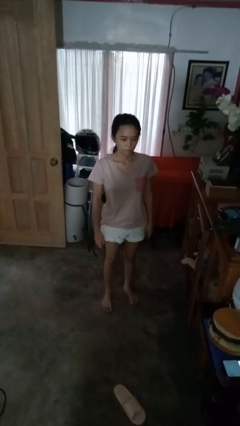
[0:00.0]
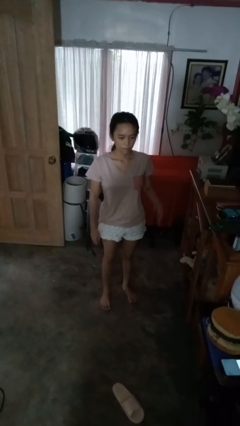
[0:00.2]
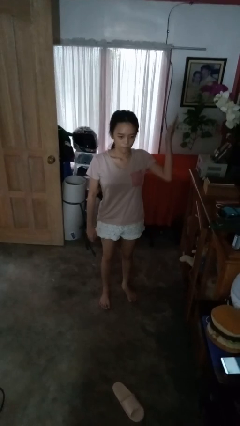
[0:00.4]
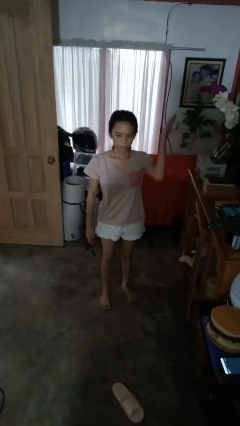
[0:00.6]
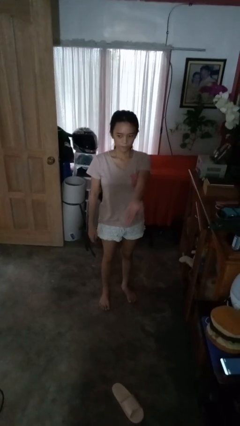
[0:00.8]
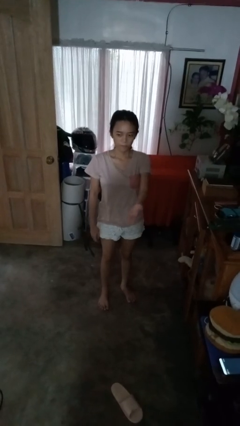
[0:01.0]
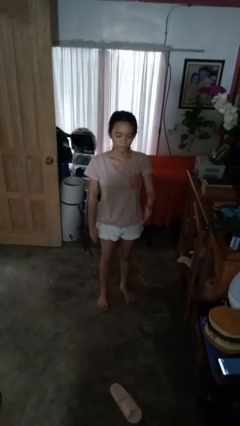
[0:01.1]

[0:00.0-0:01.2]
person karate chop

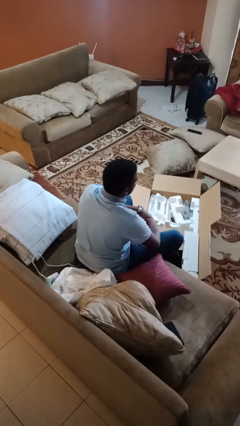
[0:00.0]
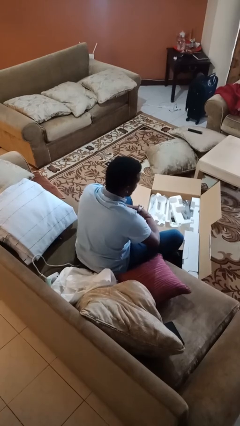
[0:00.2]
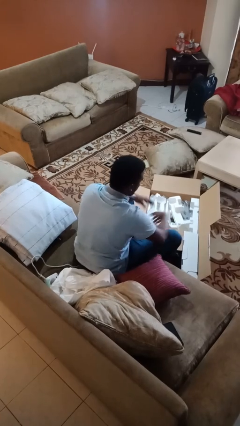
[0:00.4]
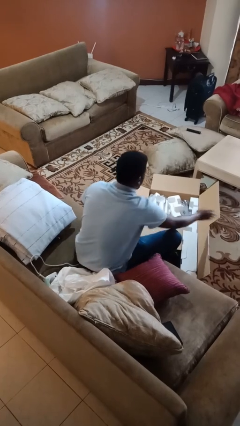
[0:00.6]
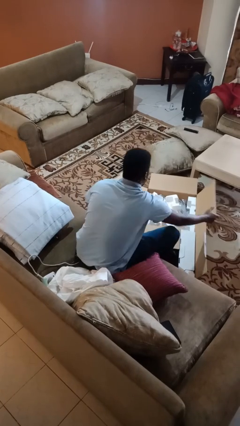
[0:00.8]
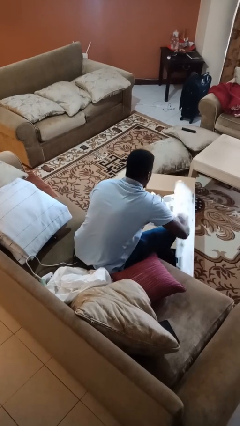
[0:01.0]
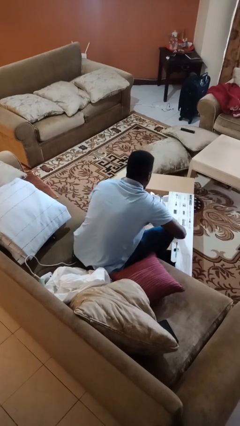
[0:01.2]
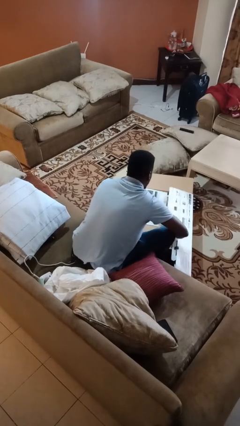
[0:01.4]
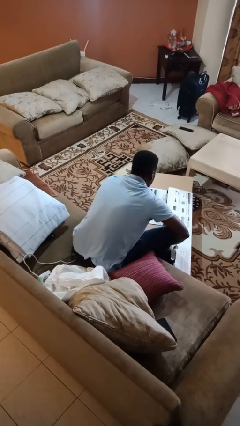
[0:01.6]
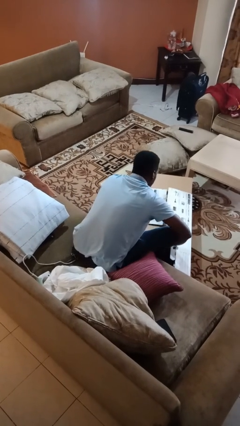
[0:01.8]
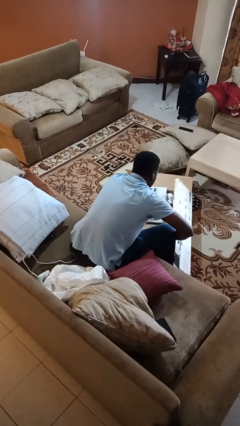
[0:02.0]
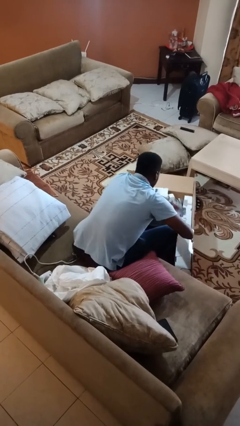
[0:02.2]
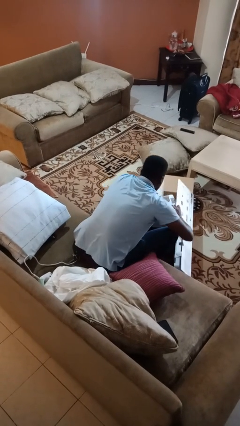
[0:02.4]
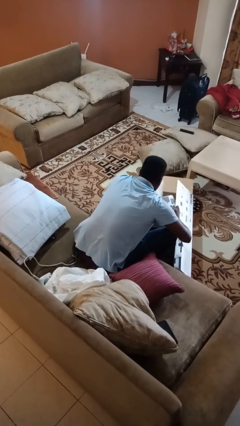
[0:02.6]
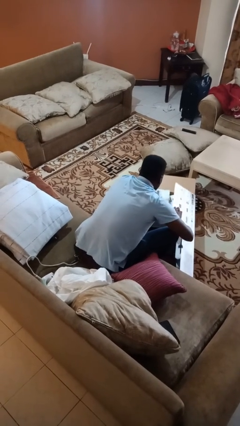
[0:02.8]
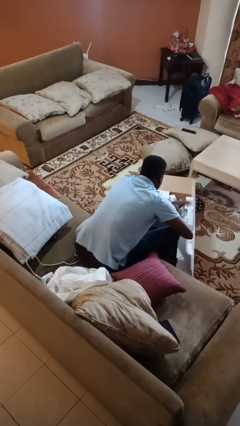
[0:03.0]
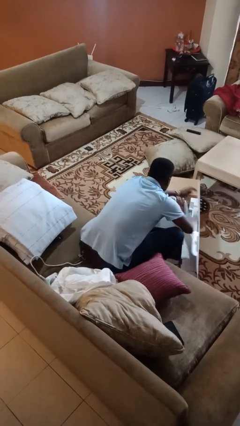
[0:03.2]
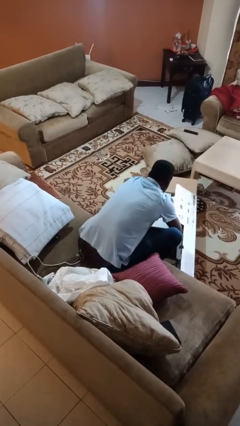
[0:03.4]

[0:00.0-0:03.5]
person closes box

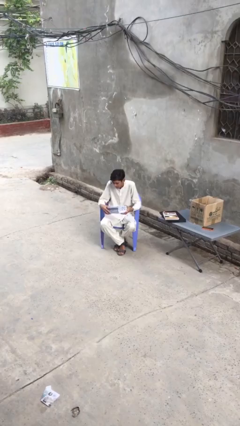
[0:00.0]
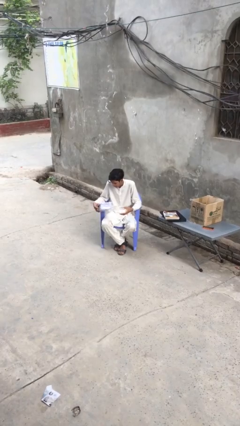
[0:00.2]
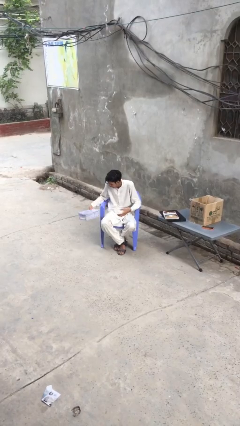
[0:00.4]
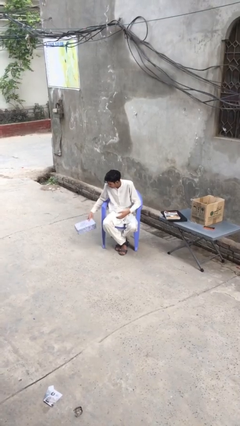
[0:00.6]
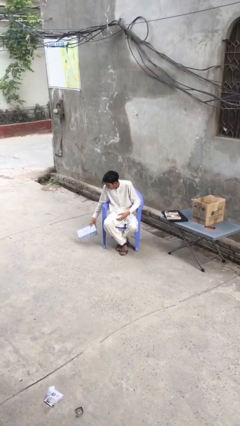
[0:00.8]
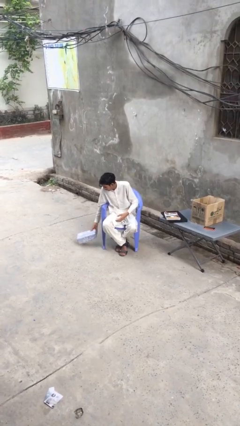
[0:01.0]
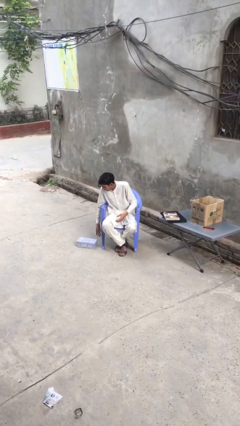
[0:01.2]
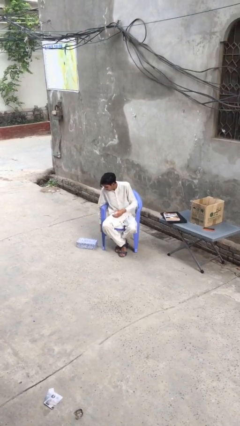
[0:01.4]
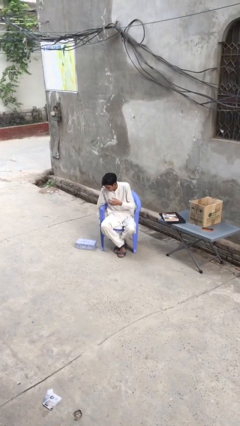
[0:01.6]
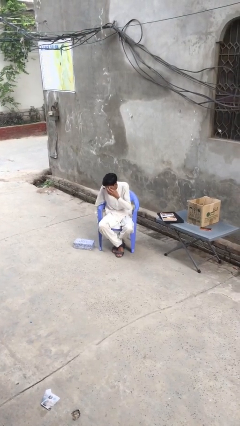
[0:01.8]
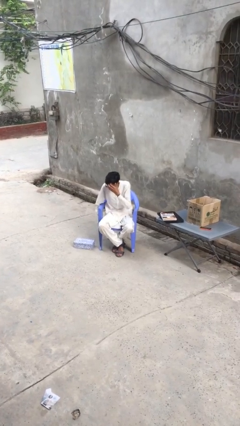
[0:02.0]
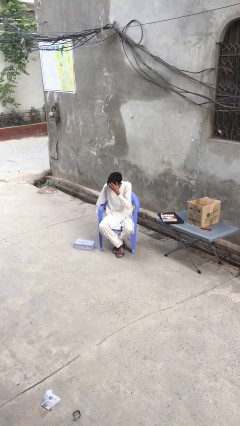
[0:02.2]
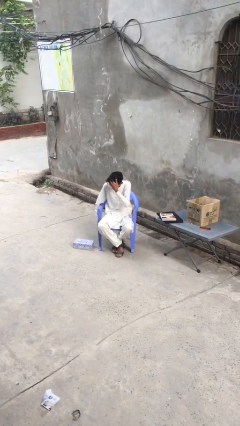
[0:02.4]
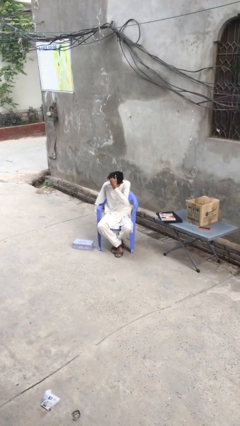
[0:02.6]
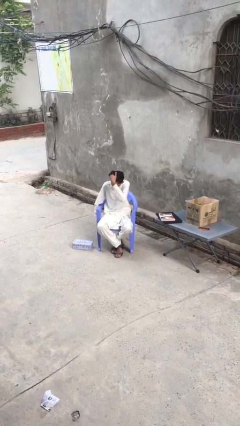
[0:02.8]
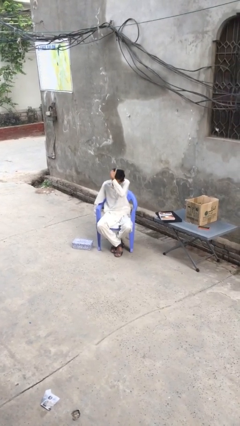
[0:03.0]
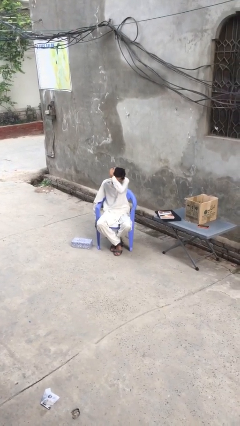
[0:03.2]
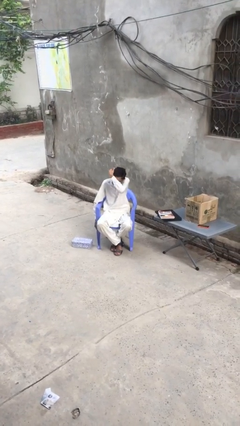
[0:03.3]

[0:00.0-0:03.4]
person puts down object on floor

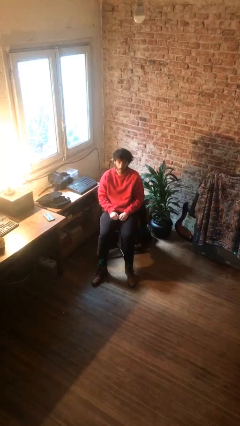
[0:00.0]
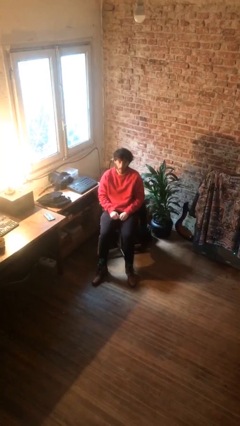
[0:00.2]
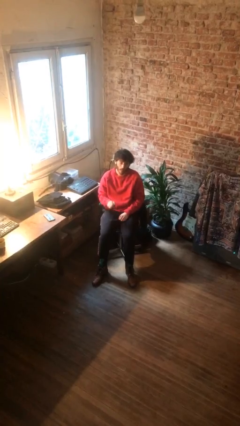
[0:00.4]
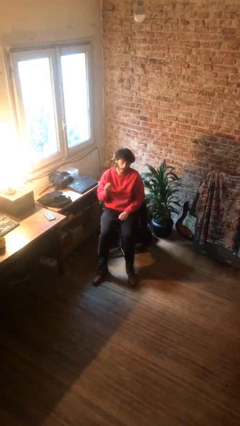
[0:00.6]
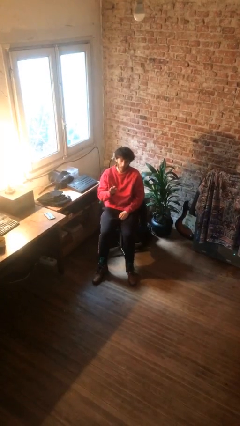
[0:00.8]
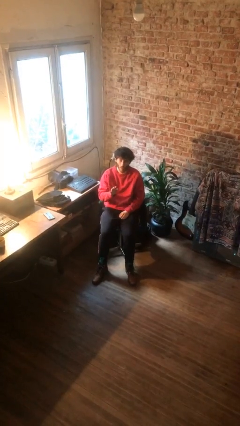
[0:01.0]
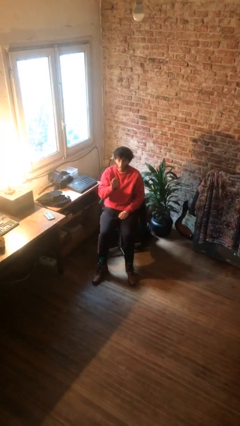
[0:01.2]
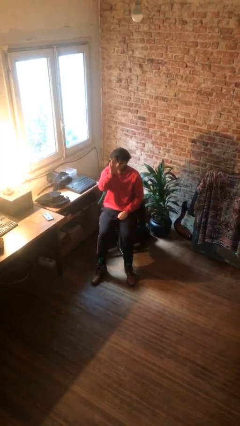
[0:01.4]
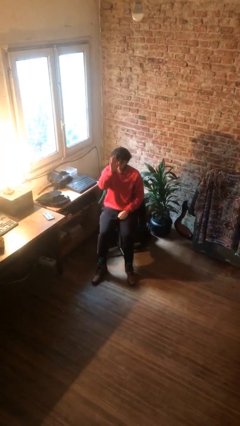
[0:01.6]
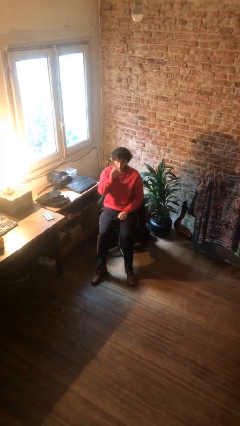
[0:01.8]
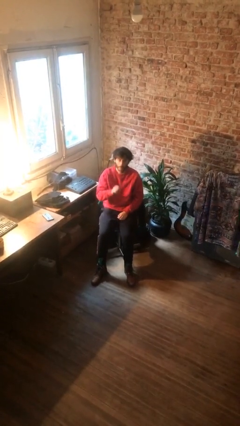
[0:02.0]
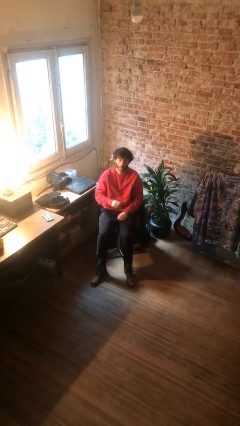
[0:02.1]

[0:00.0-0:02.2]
person gestures swipe up

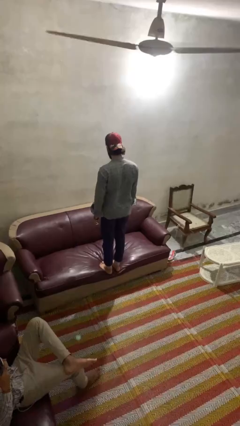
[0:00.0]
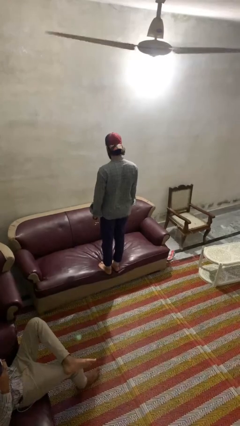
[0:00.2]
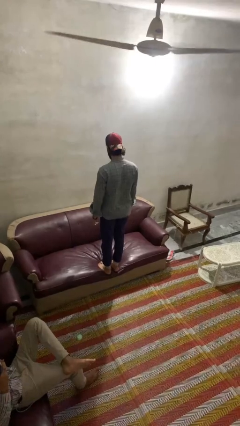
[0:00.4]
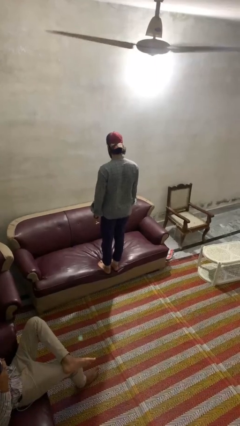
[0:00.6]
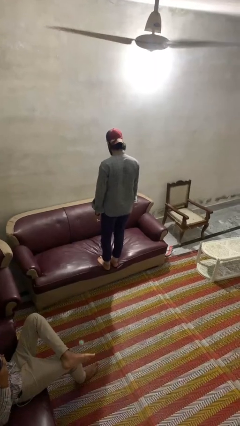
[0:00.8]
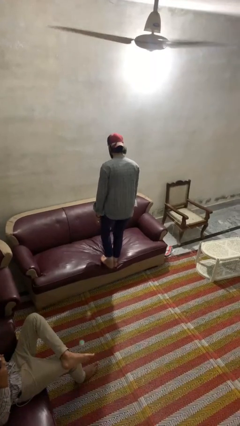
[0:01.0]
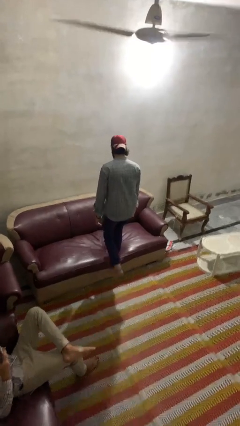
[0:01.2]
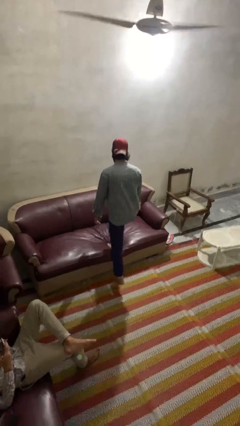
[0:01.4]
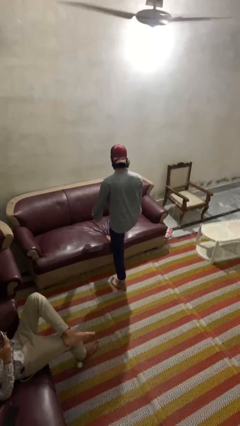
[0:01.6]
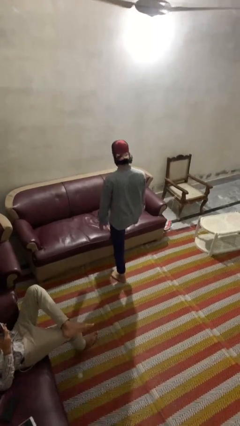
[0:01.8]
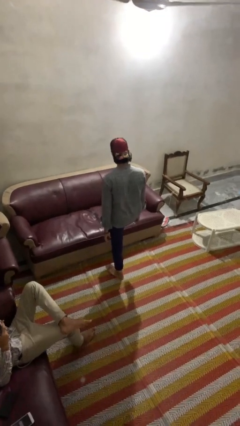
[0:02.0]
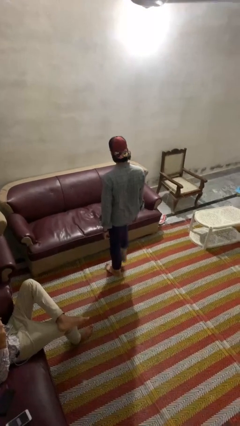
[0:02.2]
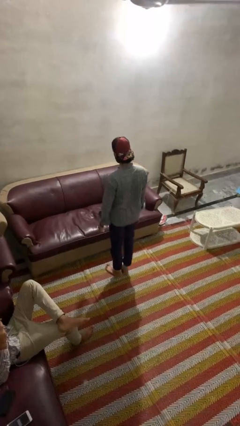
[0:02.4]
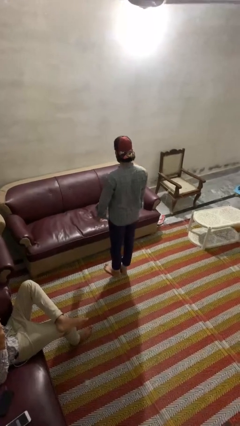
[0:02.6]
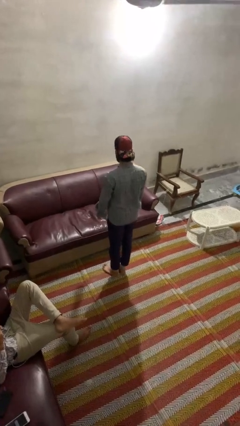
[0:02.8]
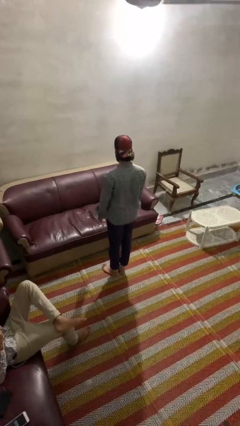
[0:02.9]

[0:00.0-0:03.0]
person climbs off couch

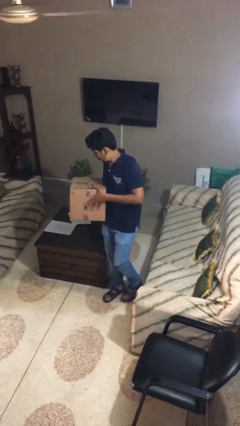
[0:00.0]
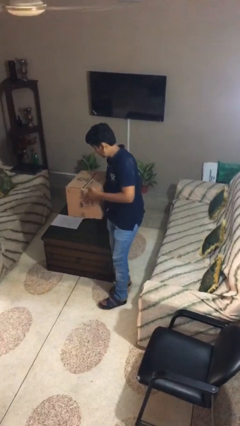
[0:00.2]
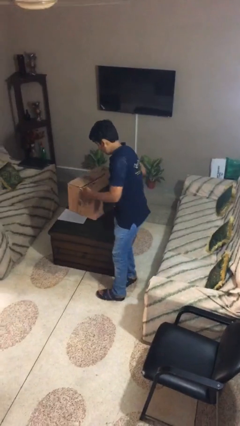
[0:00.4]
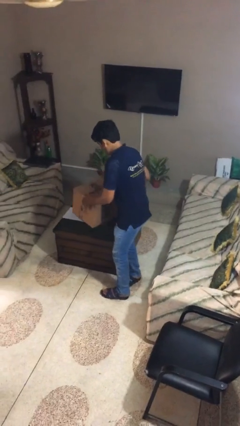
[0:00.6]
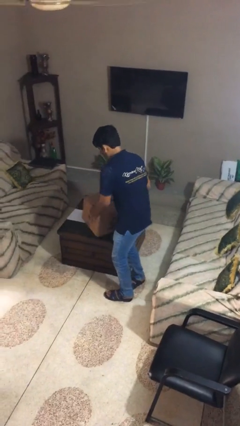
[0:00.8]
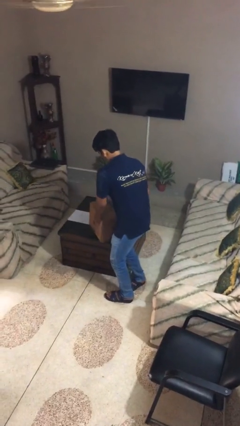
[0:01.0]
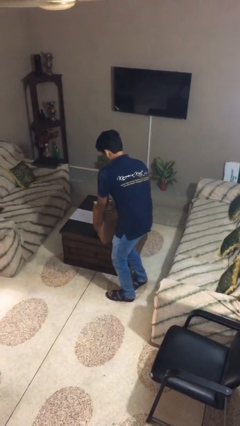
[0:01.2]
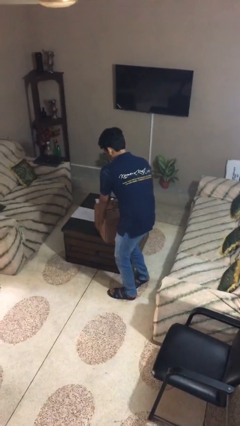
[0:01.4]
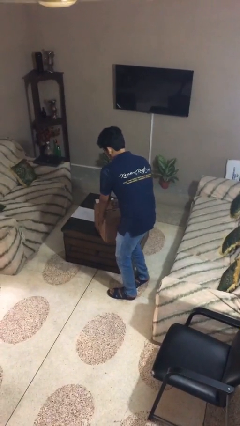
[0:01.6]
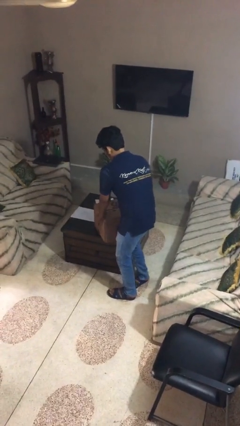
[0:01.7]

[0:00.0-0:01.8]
person puts down object on table

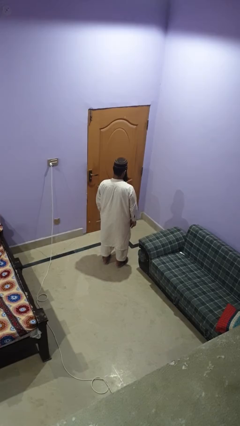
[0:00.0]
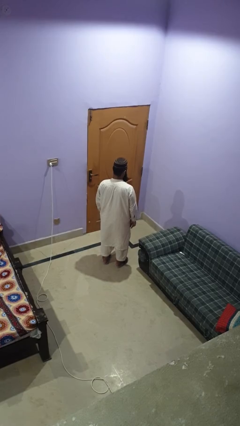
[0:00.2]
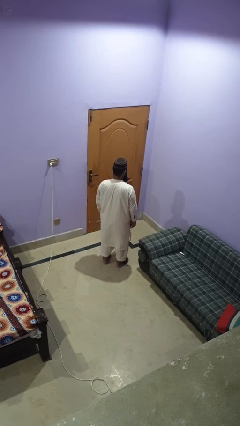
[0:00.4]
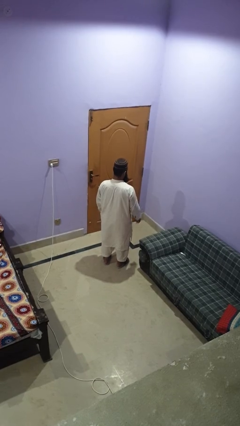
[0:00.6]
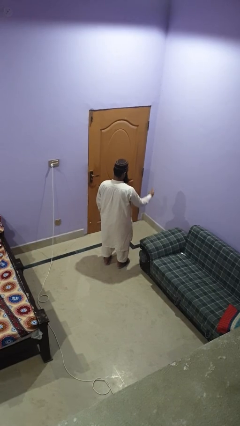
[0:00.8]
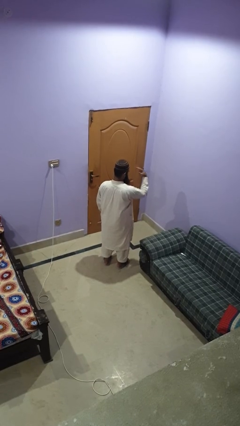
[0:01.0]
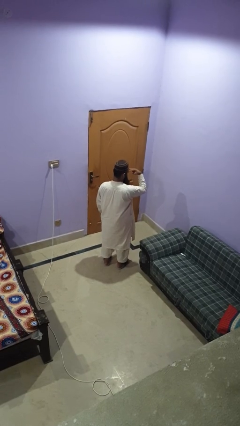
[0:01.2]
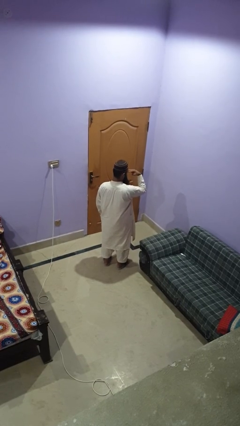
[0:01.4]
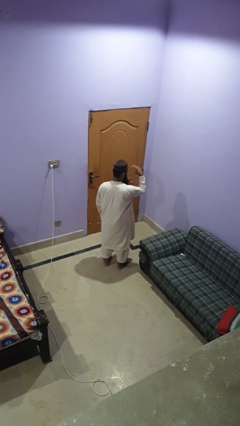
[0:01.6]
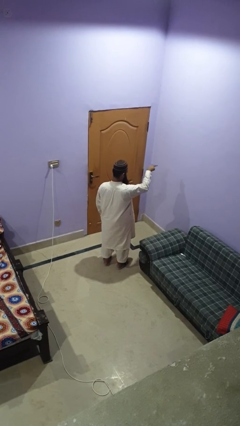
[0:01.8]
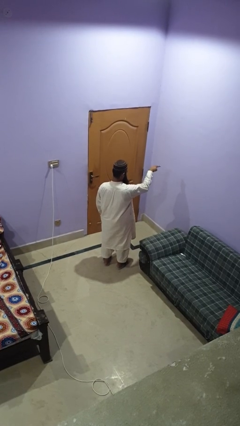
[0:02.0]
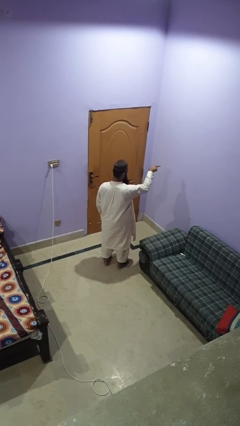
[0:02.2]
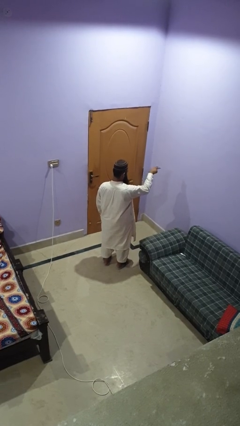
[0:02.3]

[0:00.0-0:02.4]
person gestures watch closely
